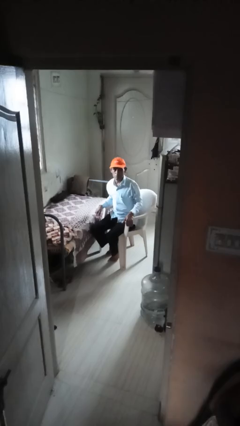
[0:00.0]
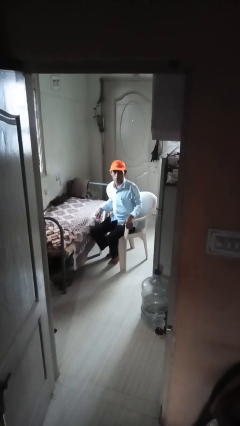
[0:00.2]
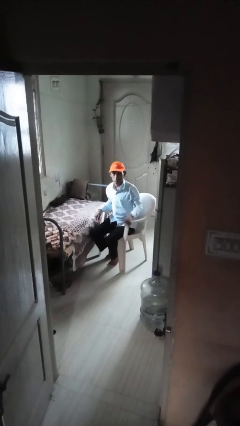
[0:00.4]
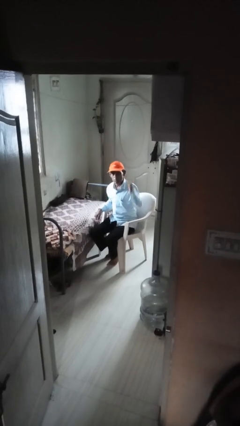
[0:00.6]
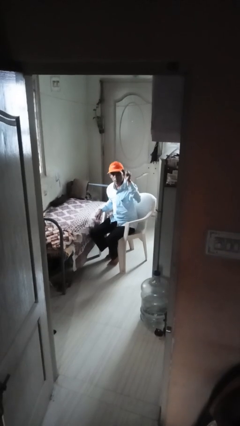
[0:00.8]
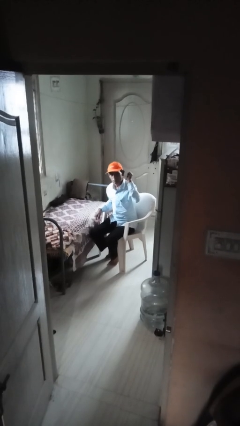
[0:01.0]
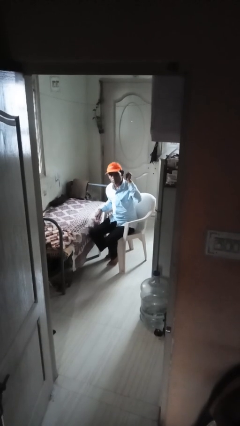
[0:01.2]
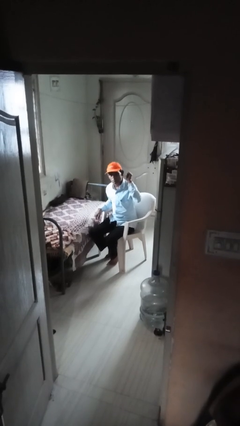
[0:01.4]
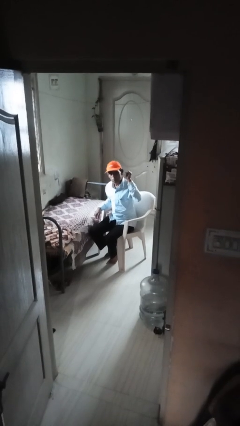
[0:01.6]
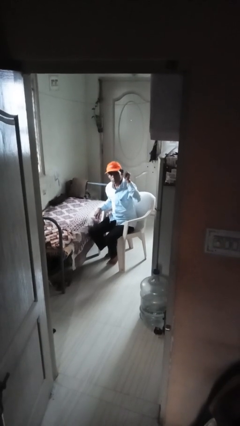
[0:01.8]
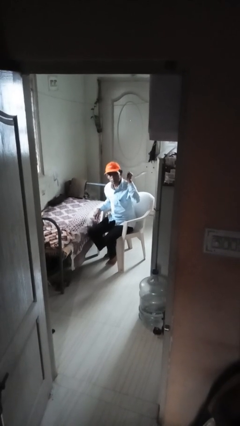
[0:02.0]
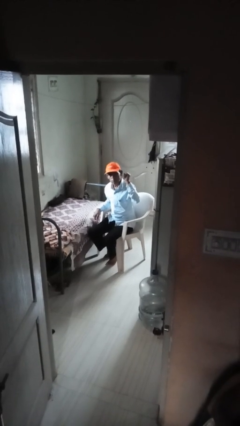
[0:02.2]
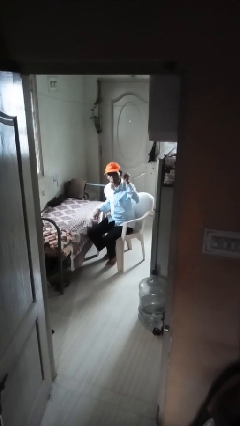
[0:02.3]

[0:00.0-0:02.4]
person gestures behind me

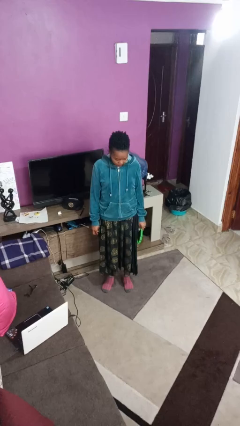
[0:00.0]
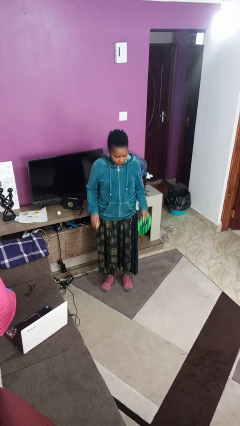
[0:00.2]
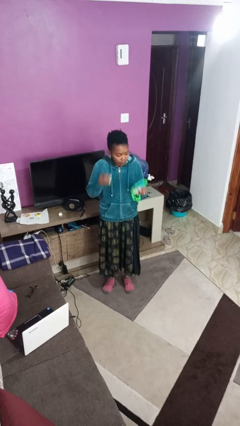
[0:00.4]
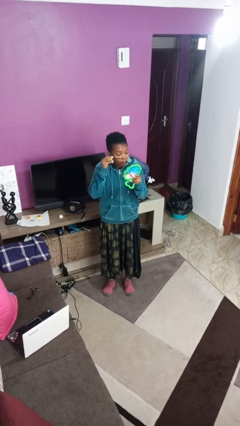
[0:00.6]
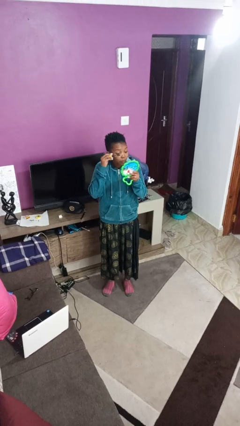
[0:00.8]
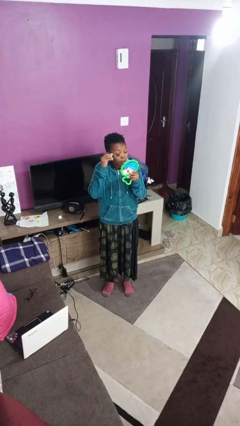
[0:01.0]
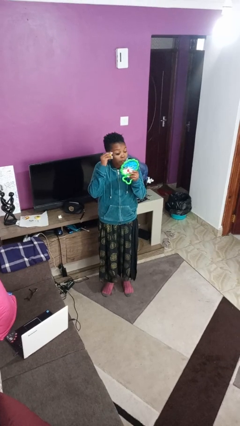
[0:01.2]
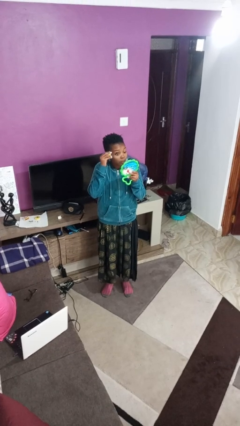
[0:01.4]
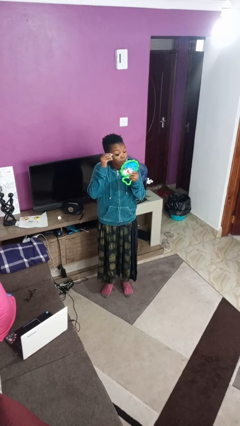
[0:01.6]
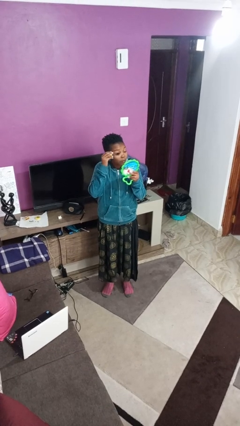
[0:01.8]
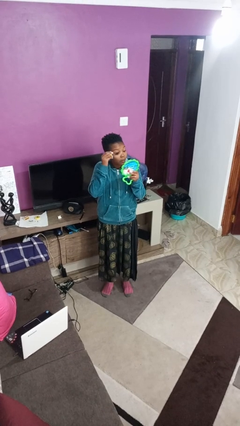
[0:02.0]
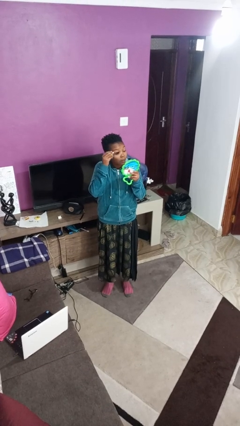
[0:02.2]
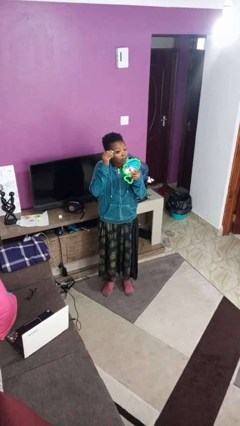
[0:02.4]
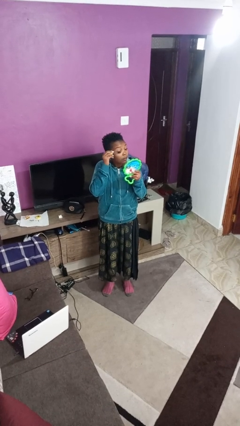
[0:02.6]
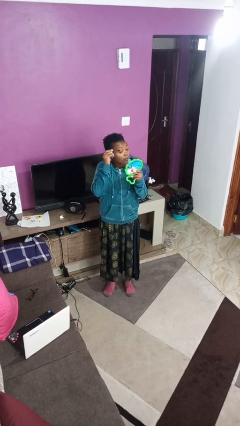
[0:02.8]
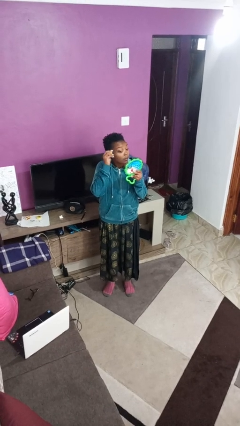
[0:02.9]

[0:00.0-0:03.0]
person applies eye makeup

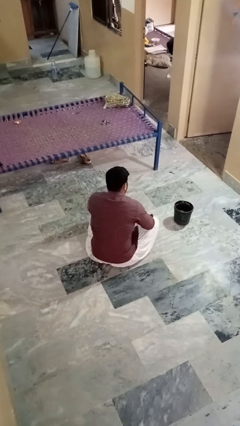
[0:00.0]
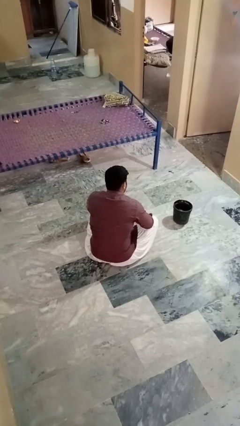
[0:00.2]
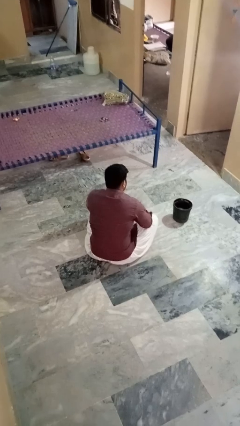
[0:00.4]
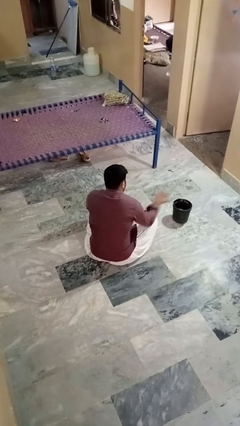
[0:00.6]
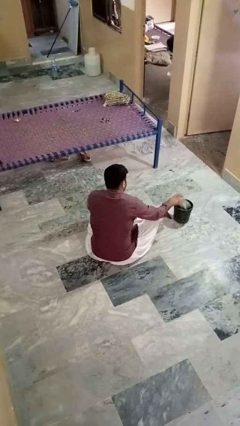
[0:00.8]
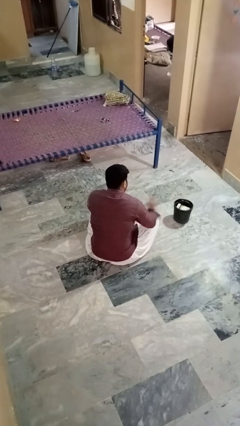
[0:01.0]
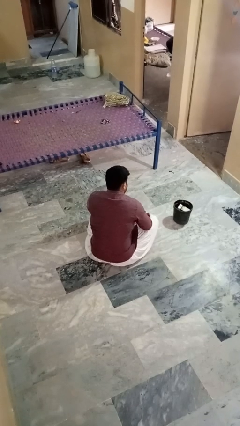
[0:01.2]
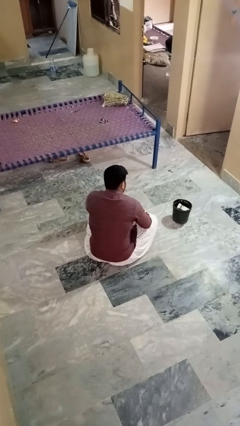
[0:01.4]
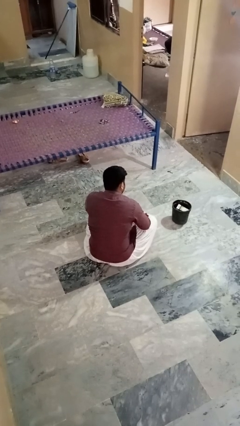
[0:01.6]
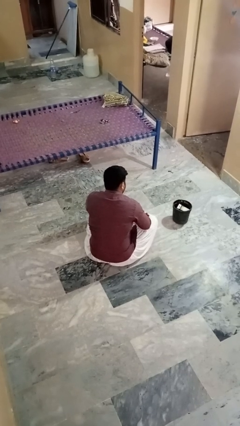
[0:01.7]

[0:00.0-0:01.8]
person puts object into basket

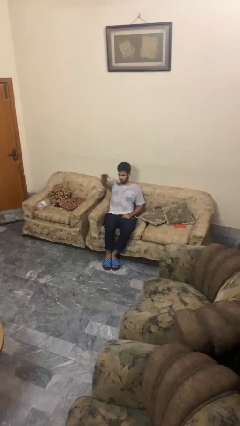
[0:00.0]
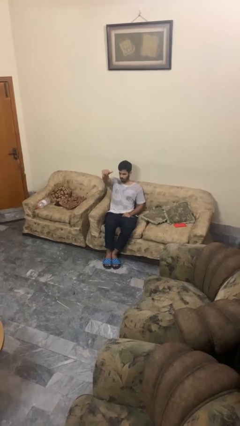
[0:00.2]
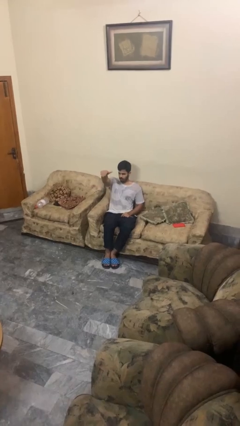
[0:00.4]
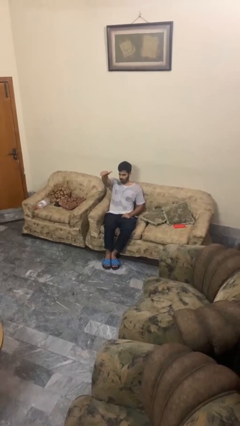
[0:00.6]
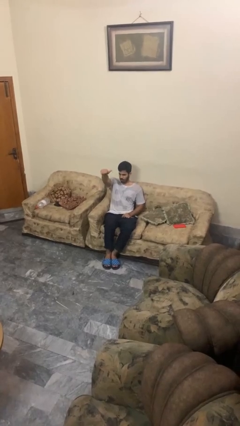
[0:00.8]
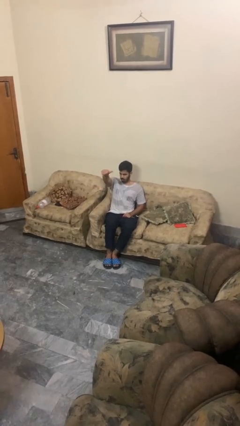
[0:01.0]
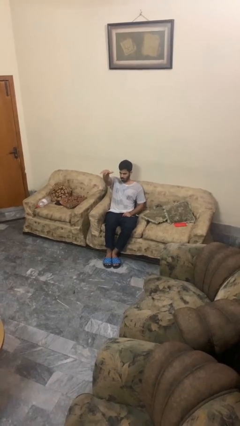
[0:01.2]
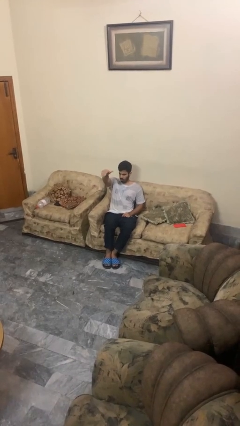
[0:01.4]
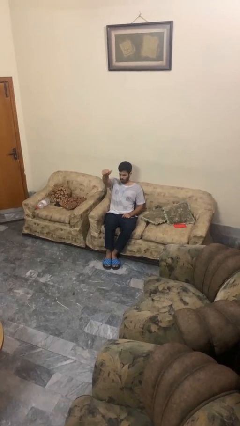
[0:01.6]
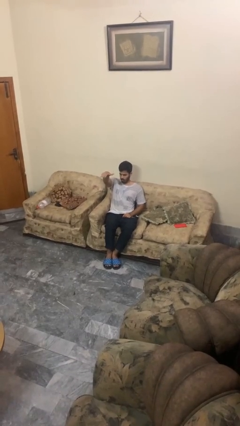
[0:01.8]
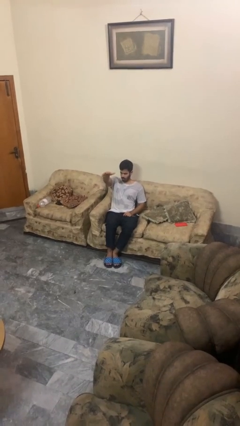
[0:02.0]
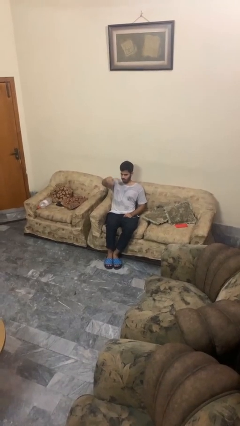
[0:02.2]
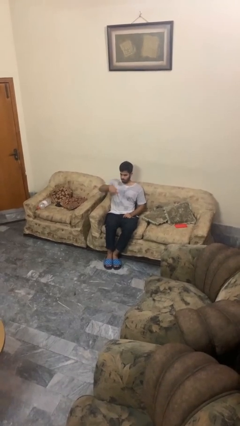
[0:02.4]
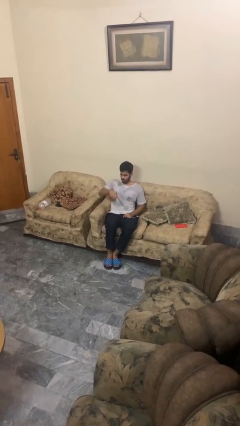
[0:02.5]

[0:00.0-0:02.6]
person gestures come here

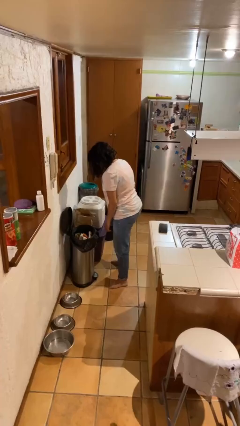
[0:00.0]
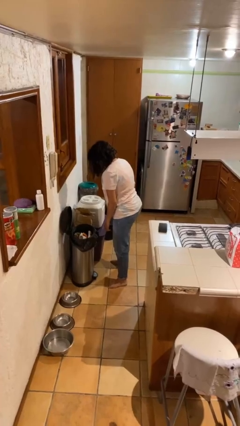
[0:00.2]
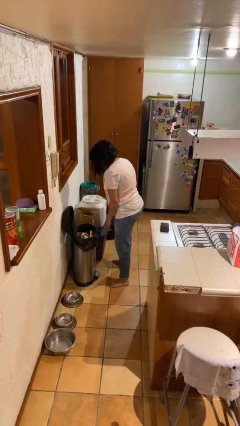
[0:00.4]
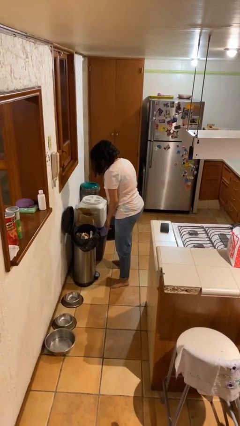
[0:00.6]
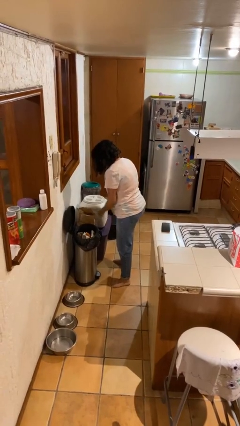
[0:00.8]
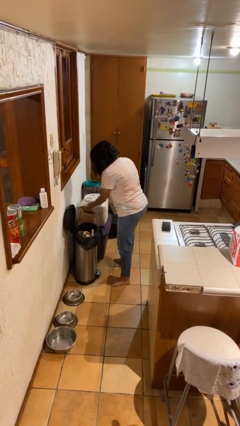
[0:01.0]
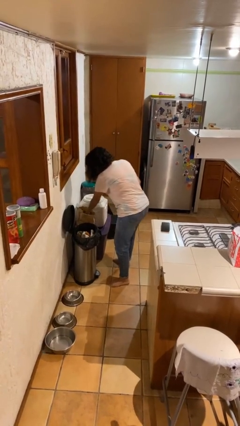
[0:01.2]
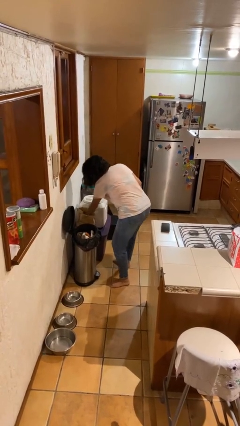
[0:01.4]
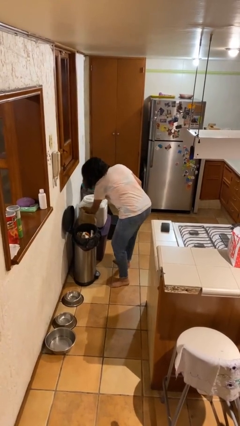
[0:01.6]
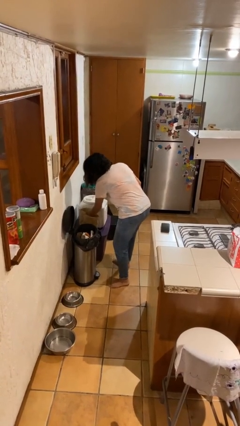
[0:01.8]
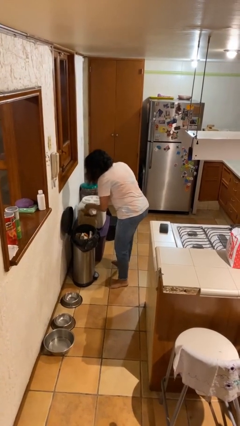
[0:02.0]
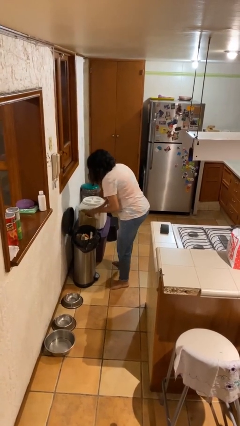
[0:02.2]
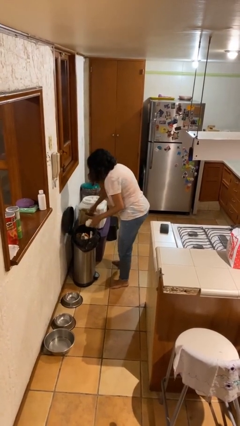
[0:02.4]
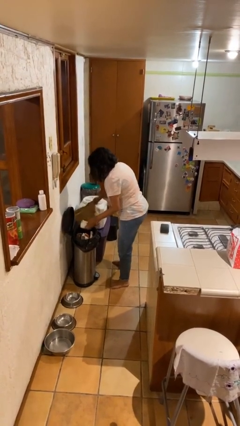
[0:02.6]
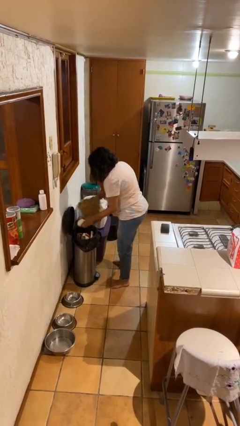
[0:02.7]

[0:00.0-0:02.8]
person discards trash

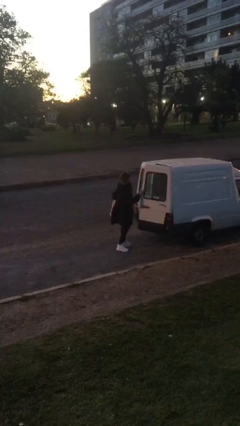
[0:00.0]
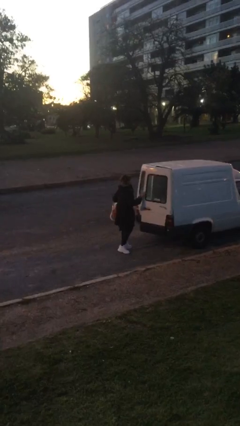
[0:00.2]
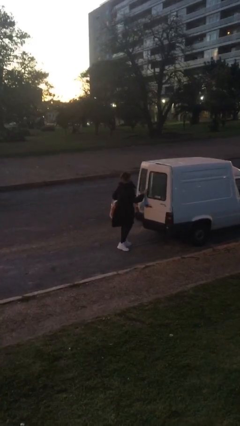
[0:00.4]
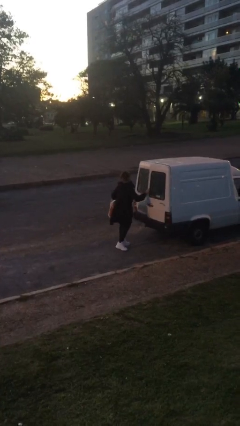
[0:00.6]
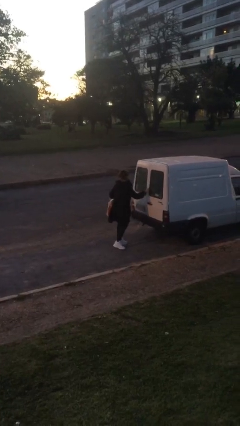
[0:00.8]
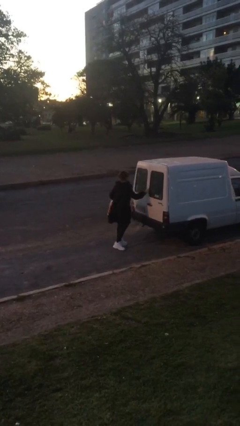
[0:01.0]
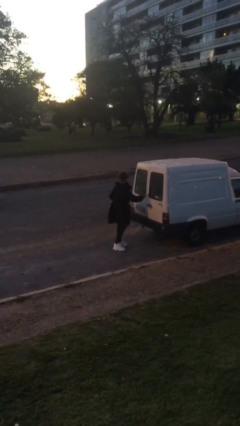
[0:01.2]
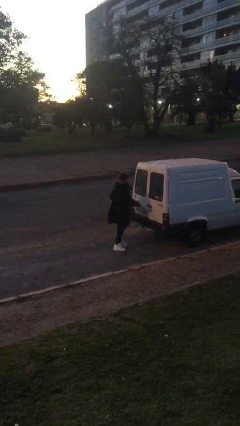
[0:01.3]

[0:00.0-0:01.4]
person closes car door

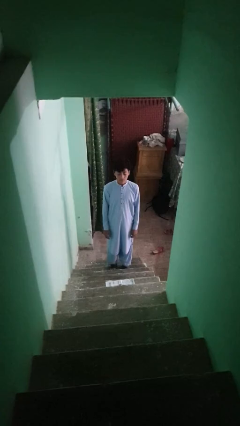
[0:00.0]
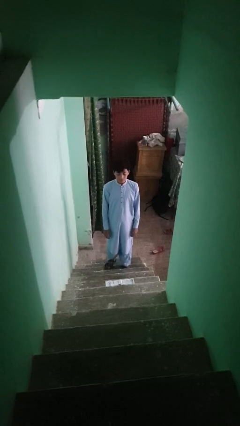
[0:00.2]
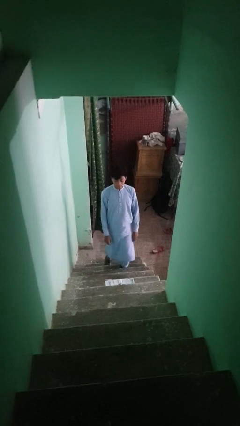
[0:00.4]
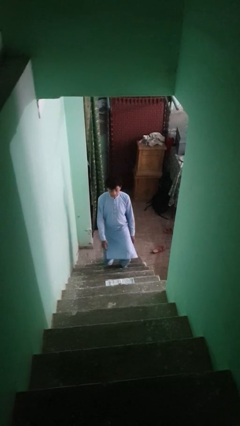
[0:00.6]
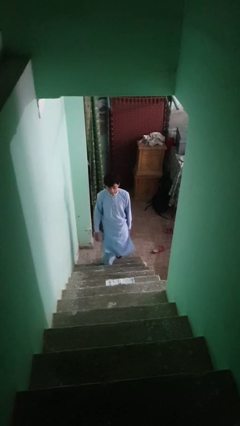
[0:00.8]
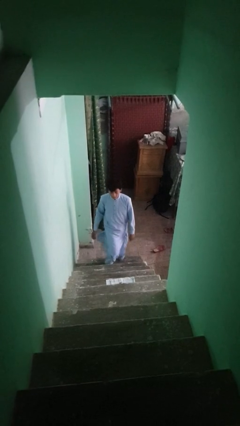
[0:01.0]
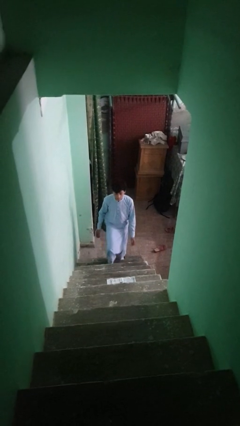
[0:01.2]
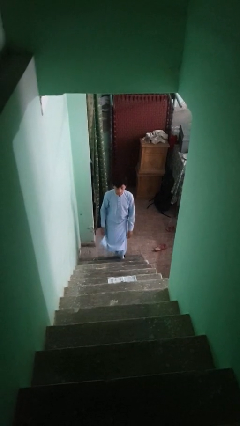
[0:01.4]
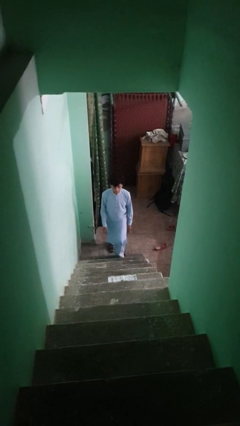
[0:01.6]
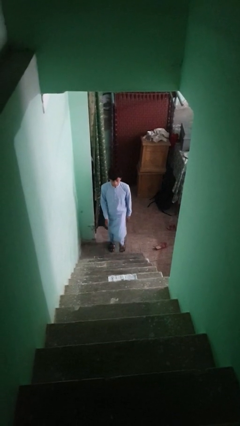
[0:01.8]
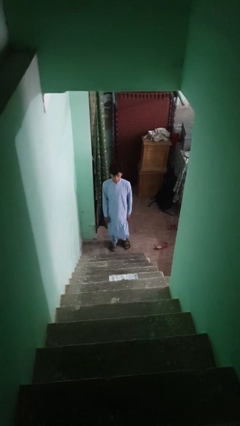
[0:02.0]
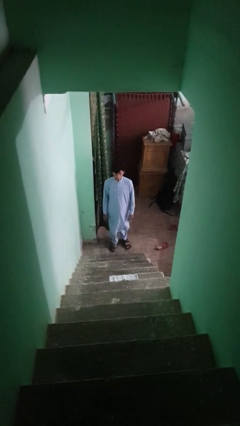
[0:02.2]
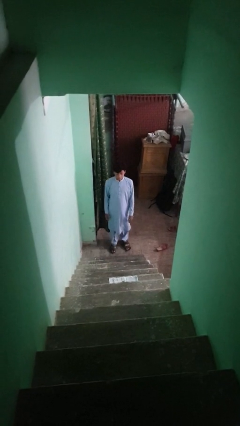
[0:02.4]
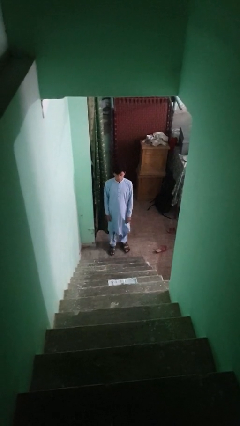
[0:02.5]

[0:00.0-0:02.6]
person climbs down stairs

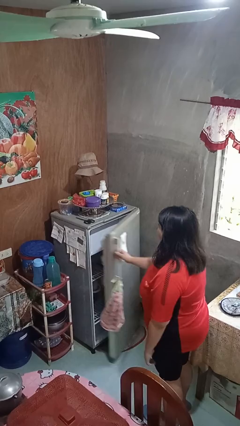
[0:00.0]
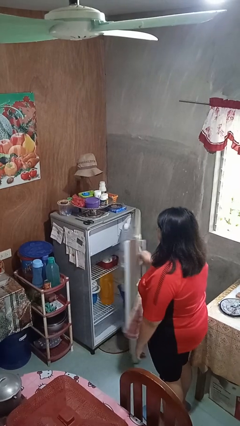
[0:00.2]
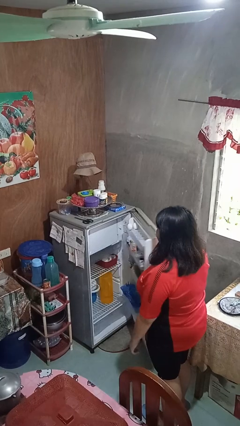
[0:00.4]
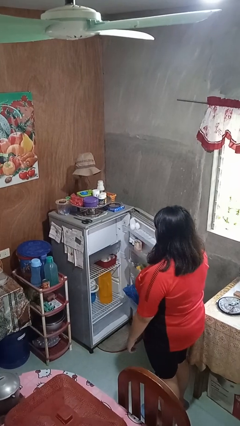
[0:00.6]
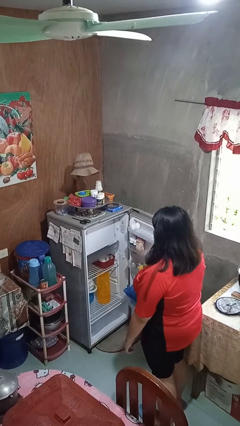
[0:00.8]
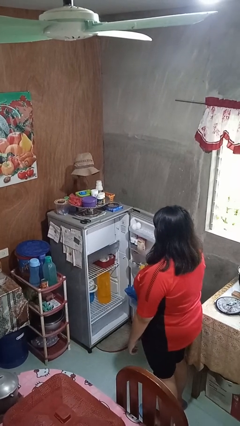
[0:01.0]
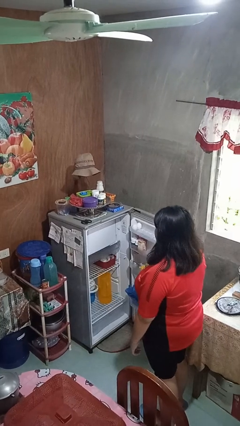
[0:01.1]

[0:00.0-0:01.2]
person opens refrigerator
